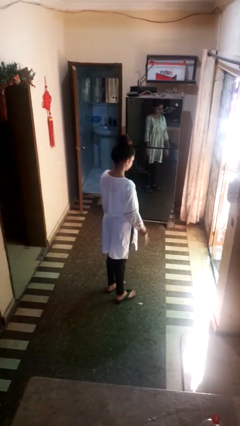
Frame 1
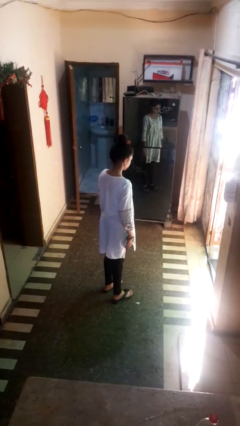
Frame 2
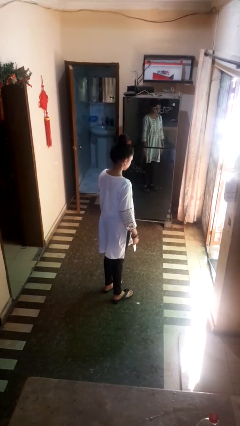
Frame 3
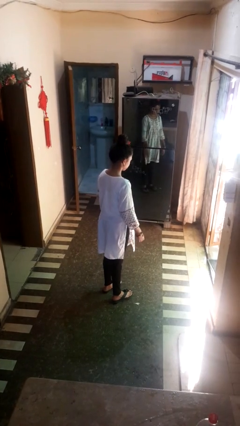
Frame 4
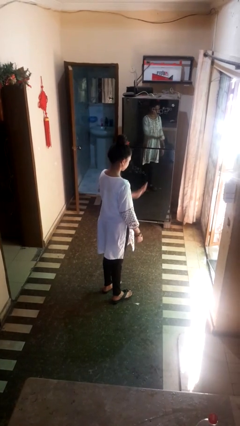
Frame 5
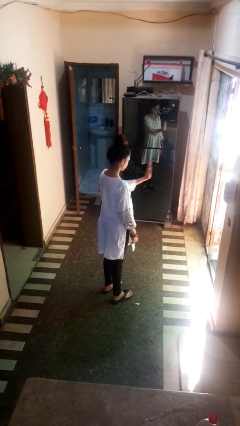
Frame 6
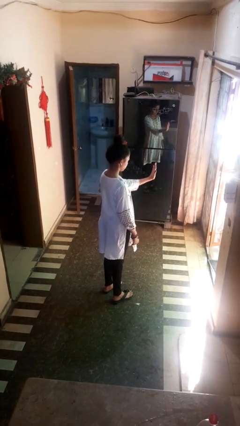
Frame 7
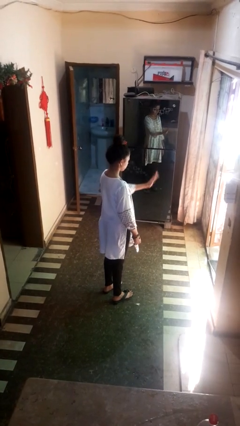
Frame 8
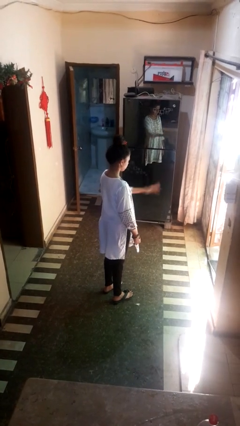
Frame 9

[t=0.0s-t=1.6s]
person gestures stop

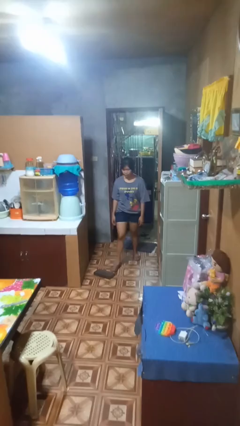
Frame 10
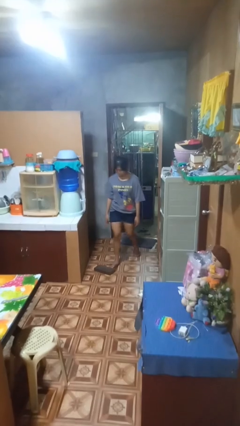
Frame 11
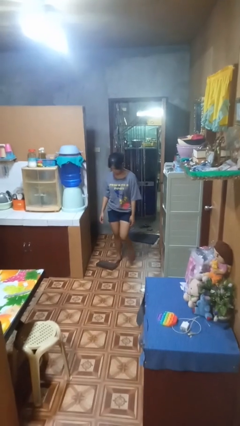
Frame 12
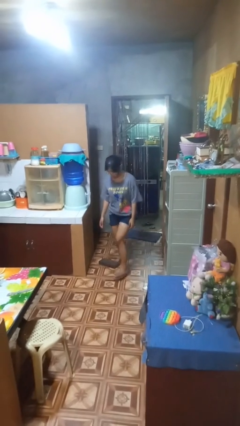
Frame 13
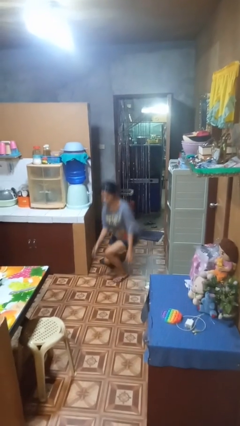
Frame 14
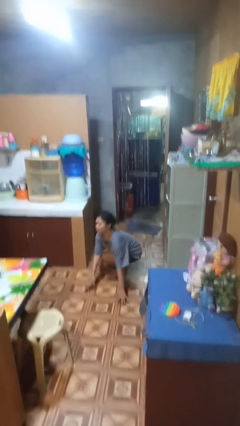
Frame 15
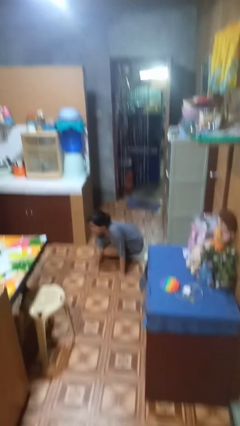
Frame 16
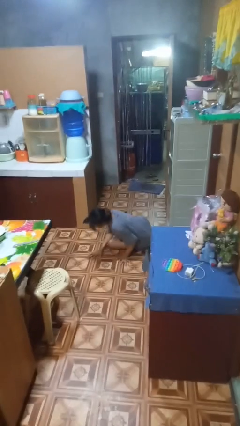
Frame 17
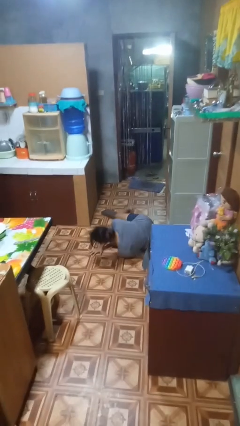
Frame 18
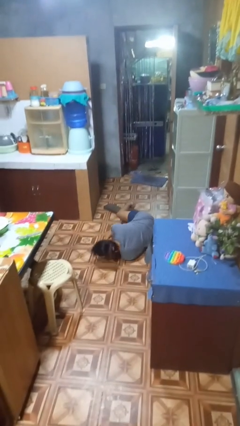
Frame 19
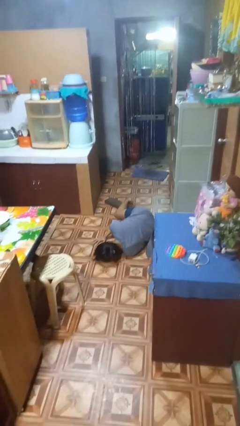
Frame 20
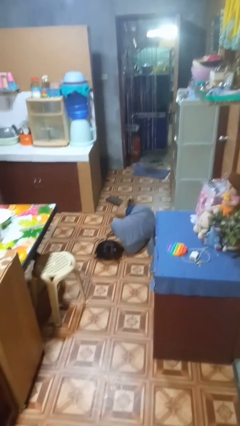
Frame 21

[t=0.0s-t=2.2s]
person trips on object on floor

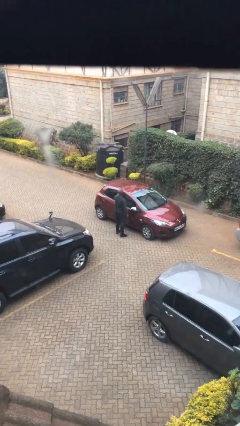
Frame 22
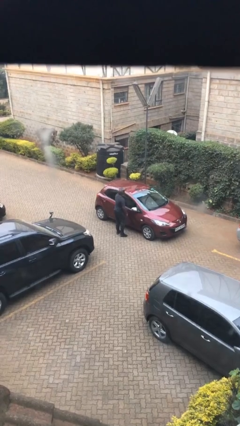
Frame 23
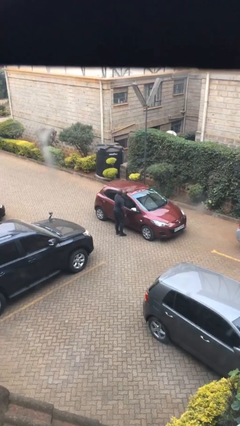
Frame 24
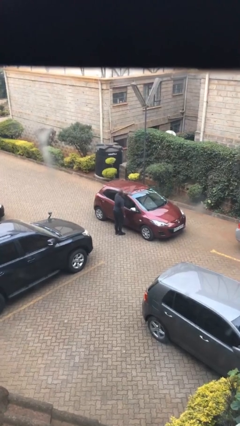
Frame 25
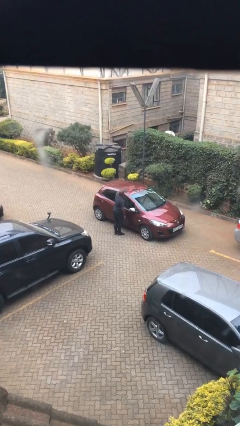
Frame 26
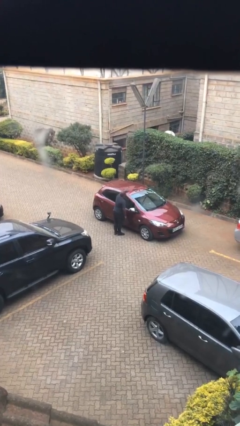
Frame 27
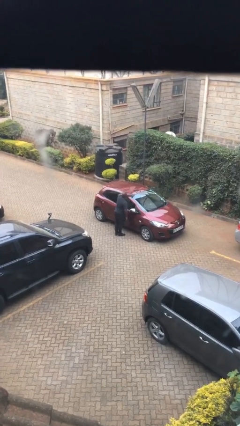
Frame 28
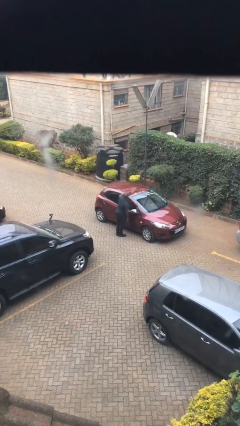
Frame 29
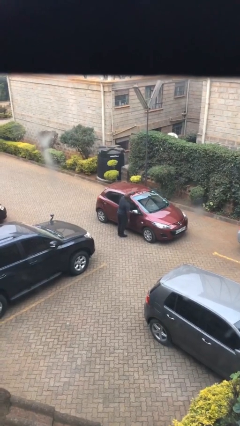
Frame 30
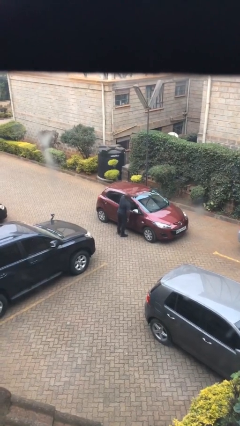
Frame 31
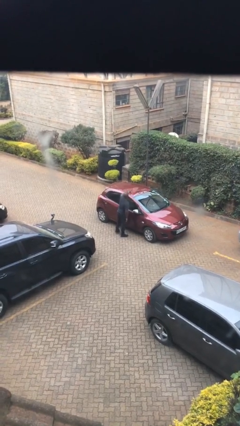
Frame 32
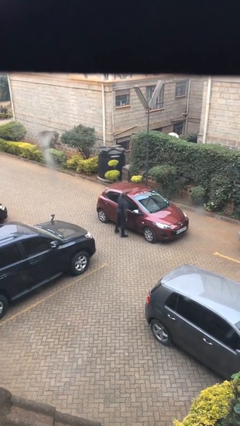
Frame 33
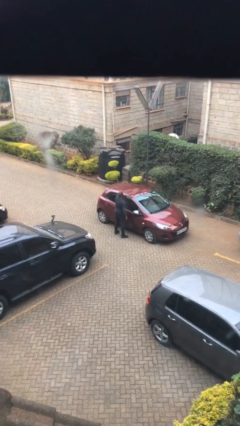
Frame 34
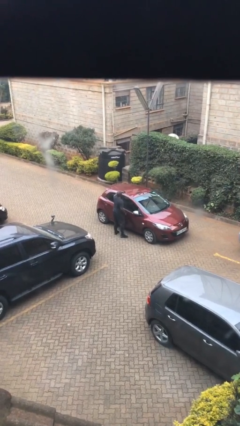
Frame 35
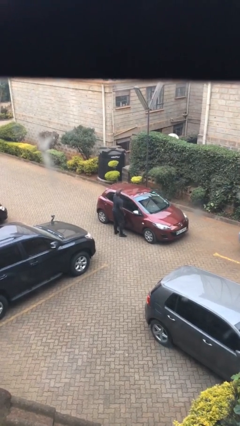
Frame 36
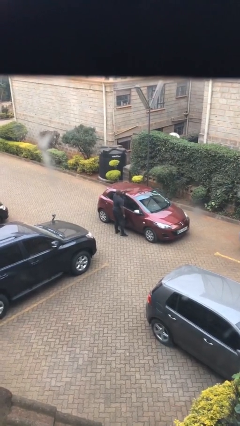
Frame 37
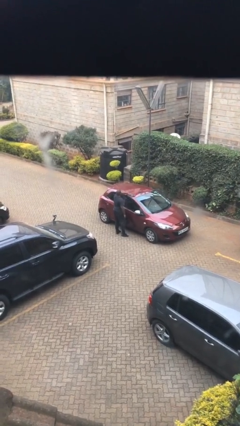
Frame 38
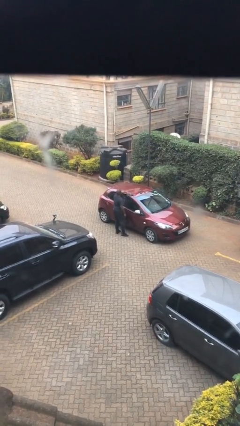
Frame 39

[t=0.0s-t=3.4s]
person polishes car with rag

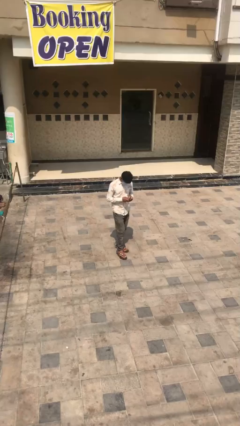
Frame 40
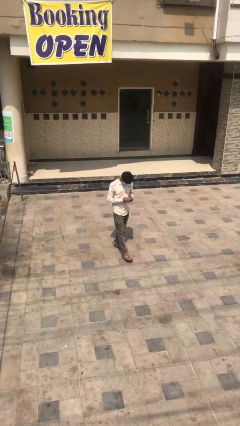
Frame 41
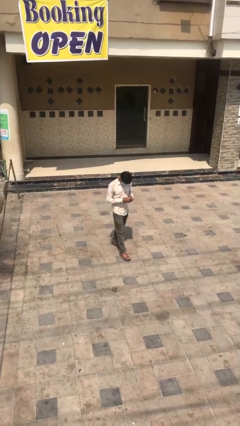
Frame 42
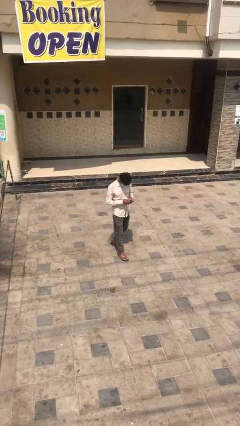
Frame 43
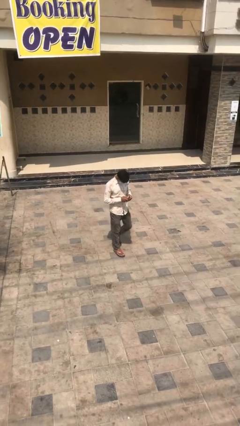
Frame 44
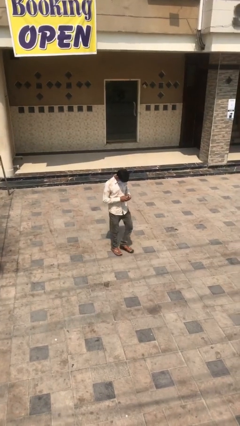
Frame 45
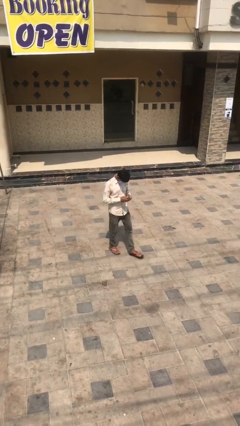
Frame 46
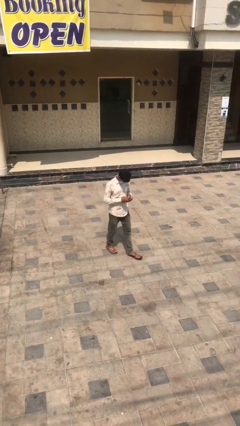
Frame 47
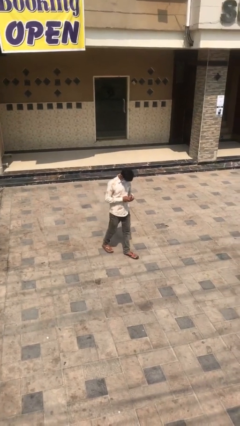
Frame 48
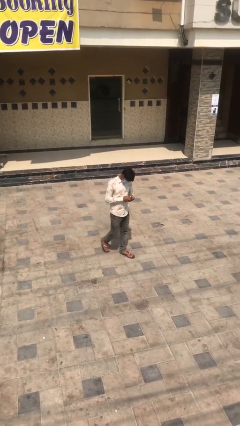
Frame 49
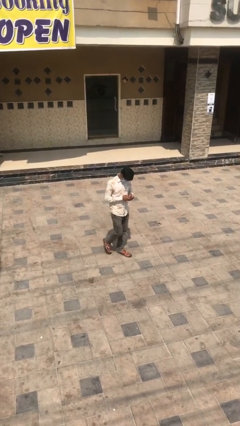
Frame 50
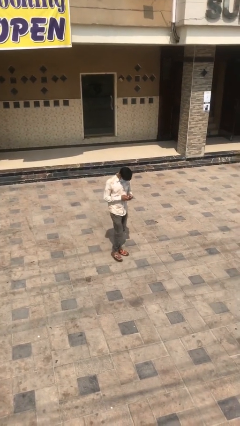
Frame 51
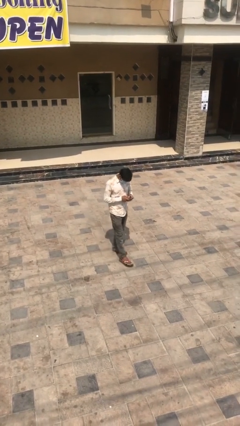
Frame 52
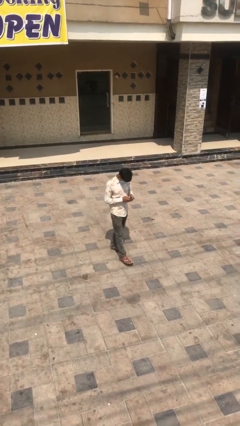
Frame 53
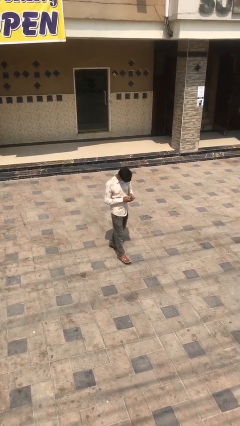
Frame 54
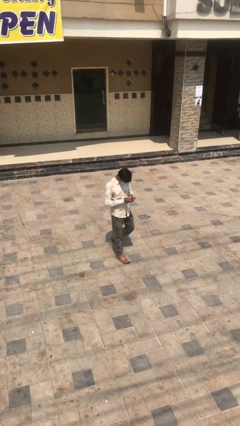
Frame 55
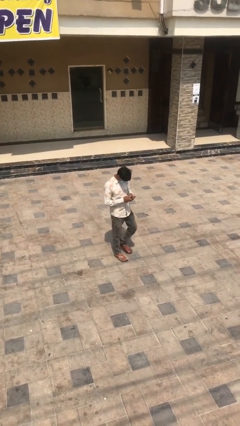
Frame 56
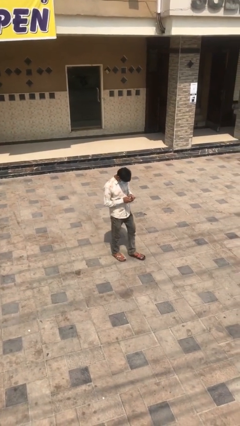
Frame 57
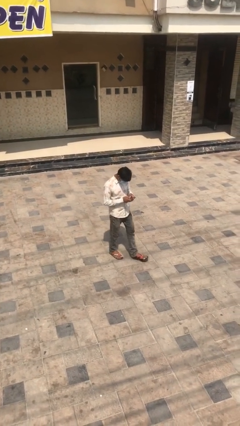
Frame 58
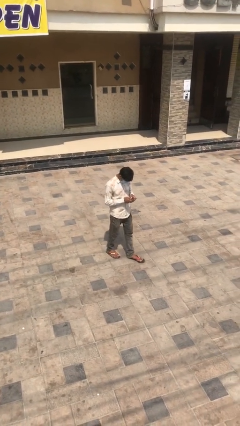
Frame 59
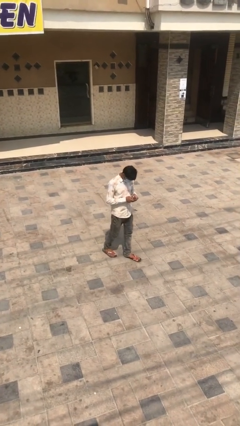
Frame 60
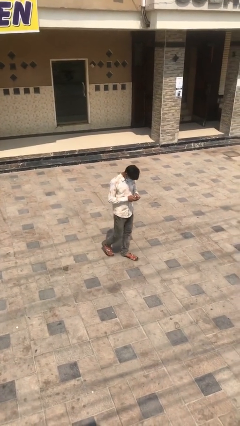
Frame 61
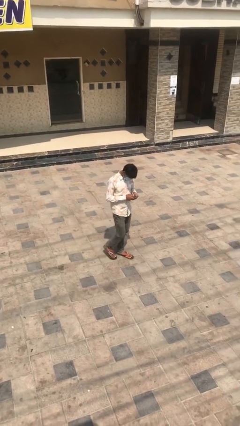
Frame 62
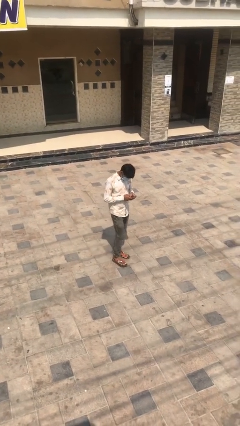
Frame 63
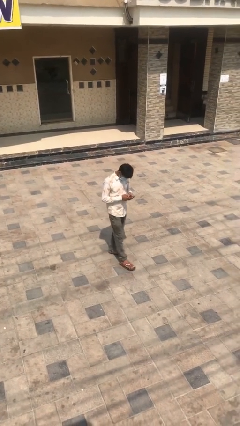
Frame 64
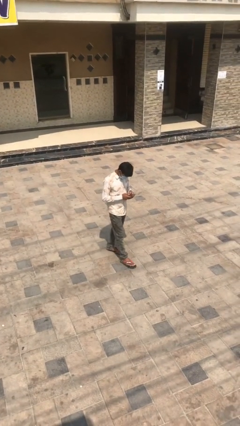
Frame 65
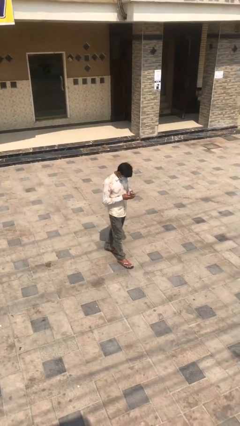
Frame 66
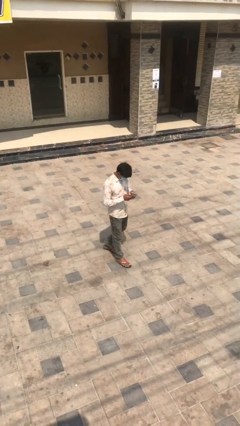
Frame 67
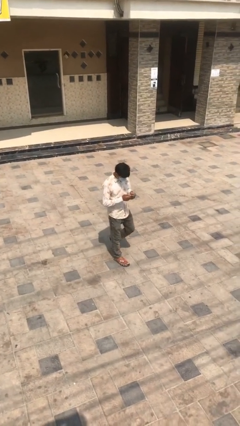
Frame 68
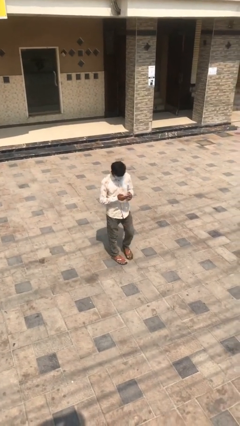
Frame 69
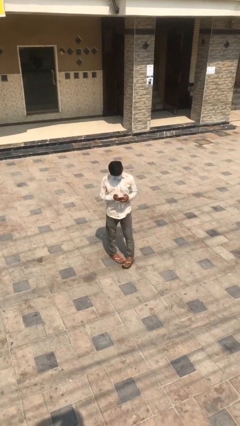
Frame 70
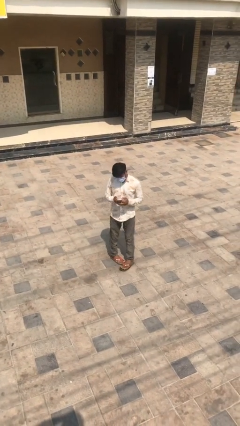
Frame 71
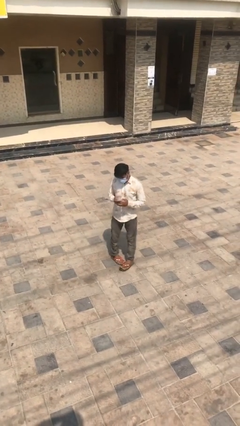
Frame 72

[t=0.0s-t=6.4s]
person texts on phone

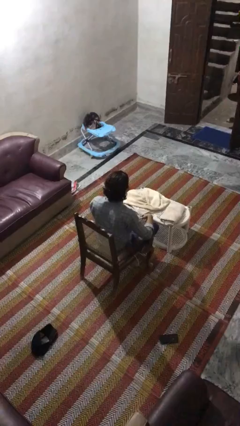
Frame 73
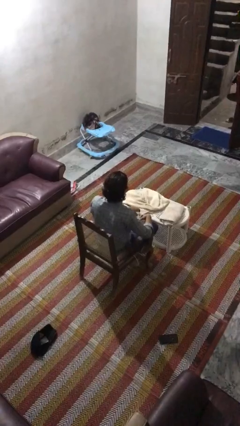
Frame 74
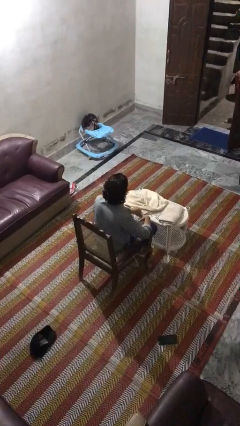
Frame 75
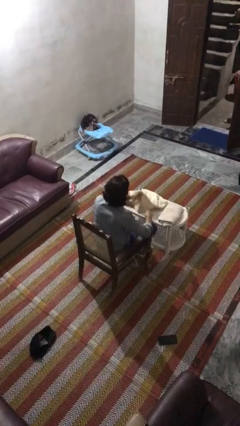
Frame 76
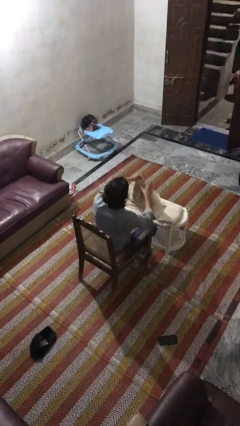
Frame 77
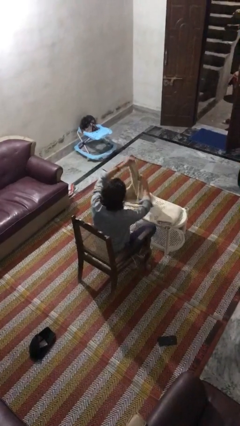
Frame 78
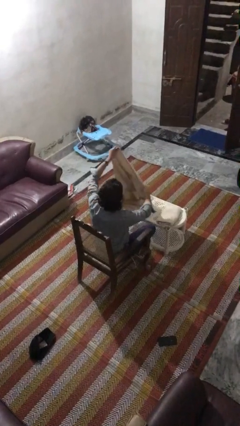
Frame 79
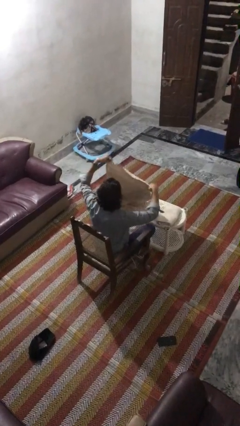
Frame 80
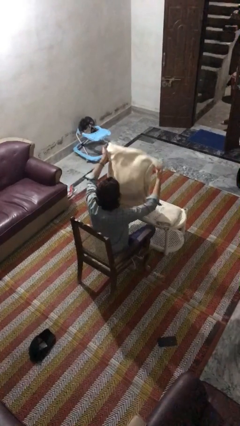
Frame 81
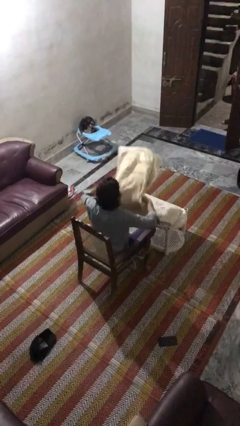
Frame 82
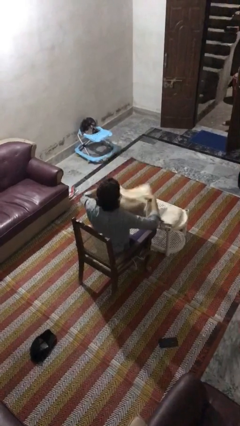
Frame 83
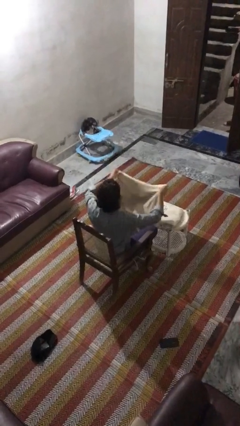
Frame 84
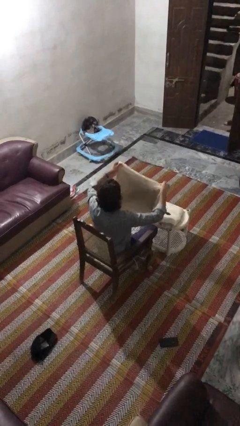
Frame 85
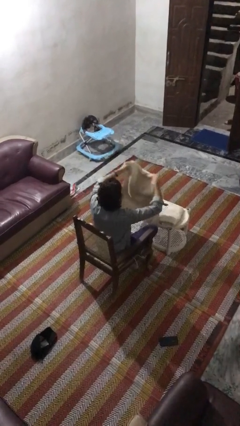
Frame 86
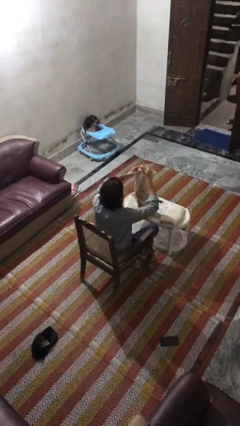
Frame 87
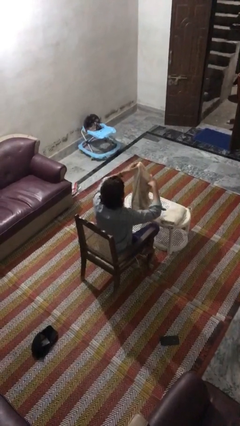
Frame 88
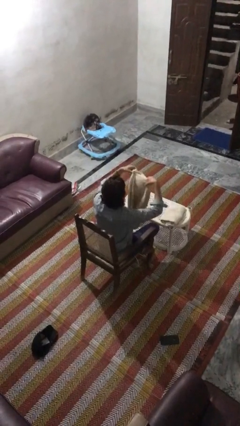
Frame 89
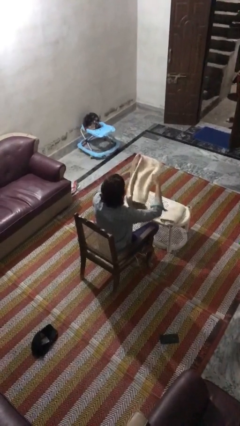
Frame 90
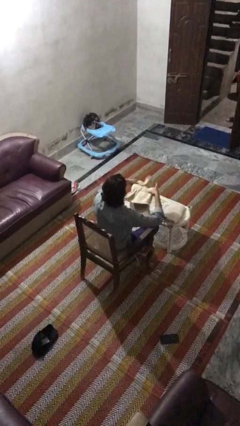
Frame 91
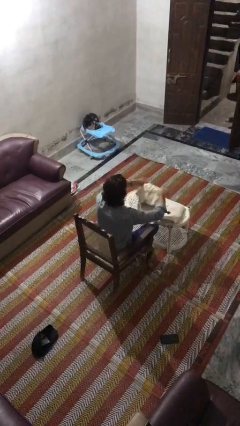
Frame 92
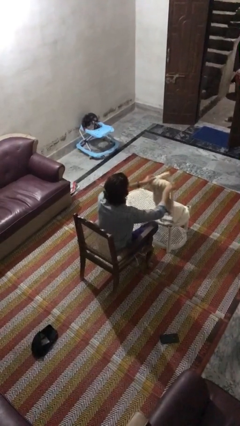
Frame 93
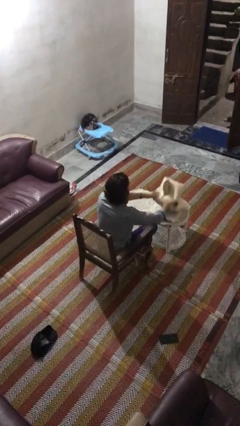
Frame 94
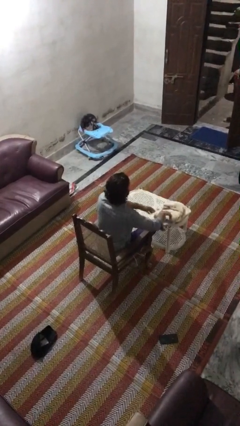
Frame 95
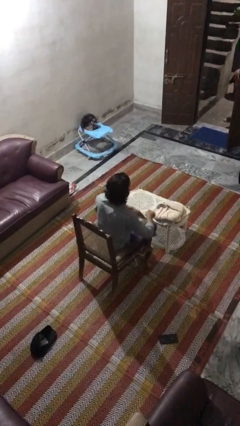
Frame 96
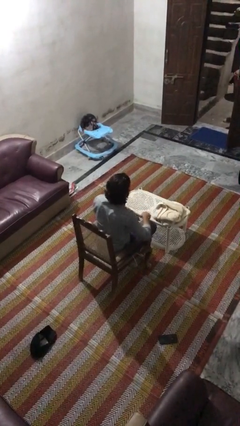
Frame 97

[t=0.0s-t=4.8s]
person folds towel
